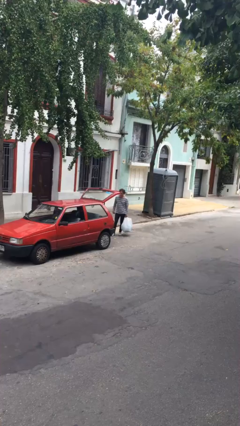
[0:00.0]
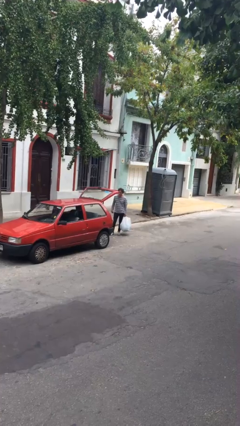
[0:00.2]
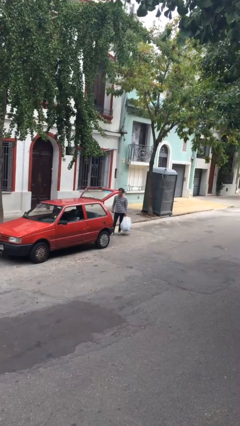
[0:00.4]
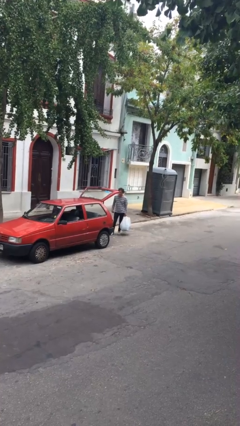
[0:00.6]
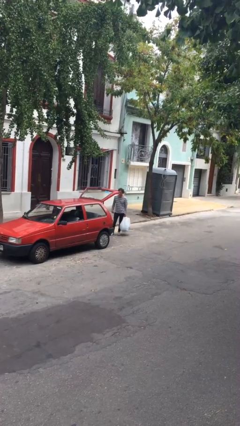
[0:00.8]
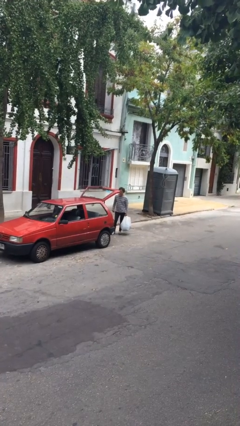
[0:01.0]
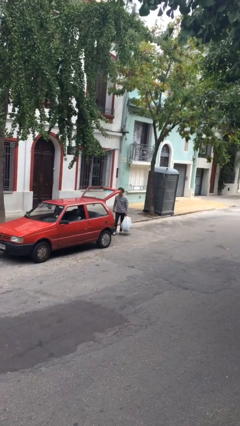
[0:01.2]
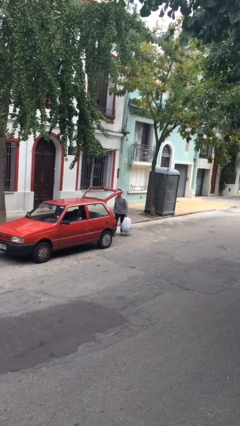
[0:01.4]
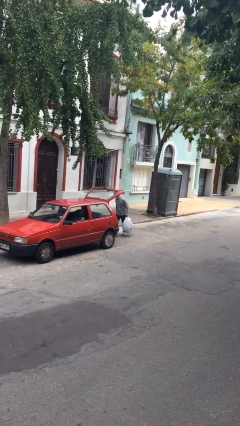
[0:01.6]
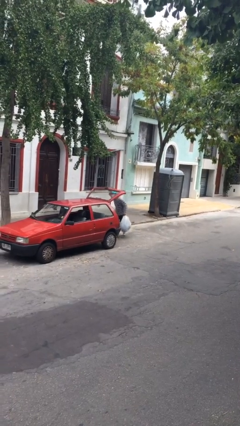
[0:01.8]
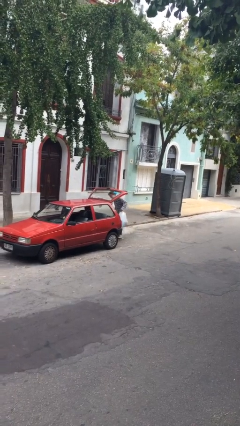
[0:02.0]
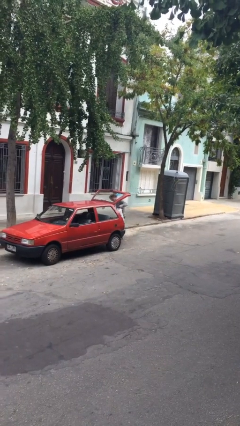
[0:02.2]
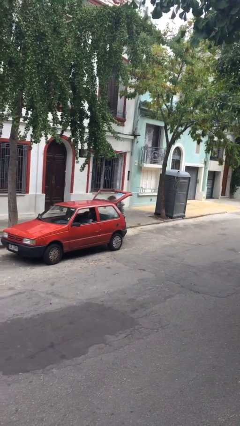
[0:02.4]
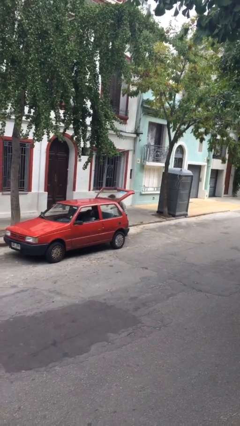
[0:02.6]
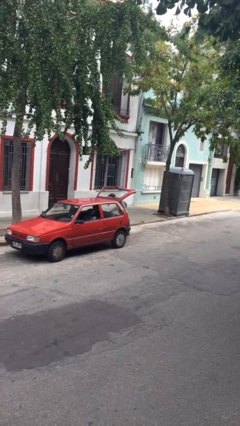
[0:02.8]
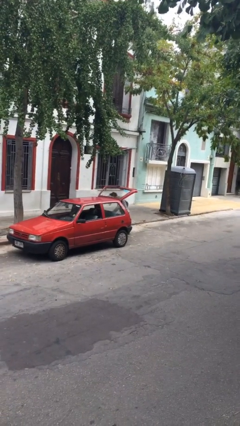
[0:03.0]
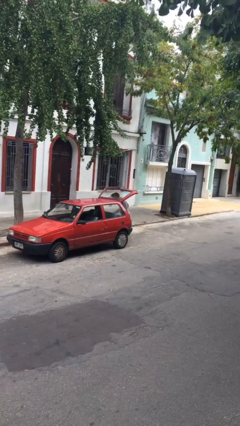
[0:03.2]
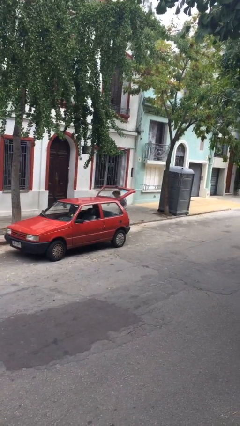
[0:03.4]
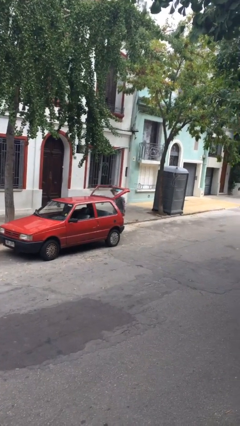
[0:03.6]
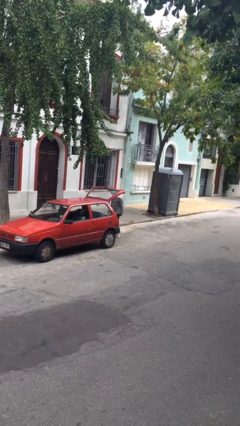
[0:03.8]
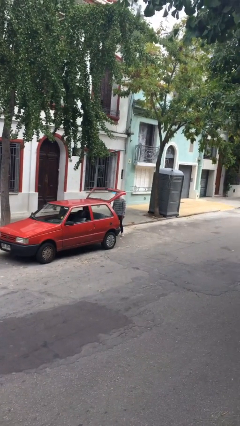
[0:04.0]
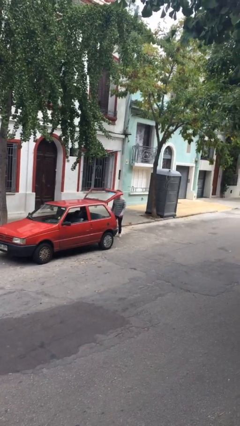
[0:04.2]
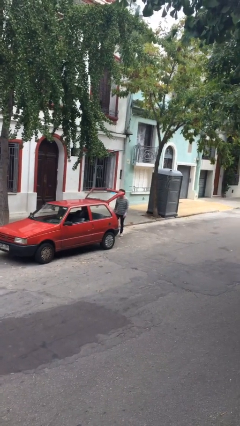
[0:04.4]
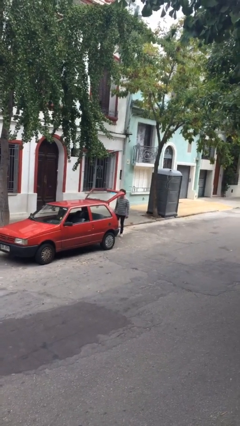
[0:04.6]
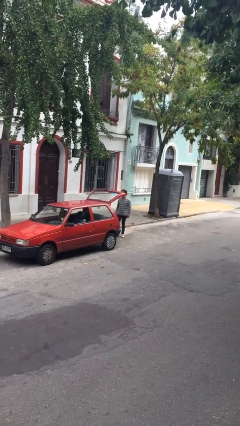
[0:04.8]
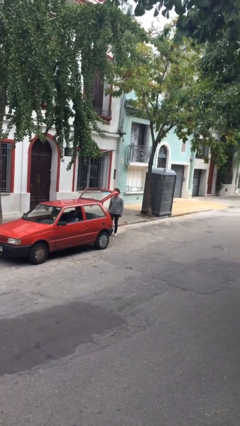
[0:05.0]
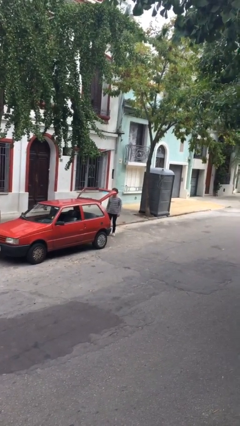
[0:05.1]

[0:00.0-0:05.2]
person loads car

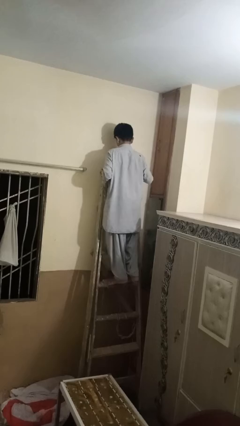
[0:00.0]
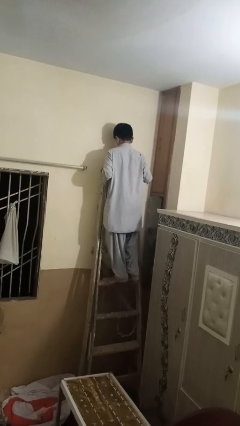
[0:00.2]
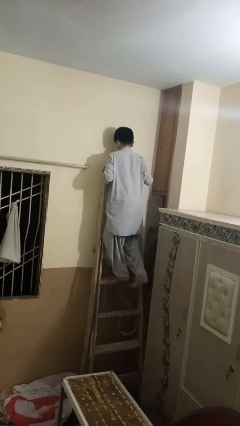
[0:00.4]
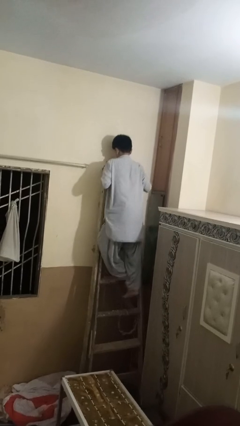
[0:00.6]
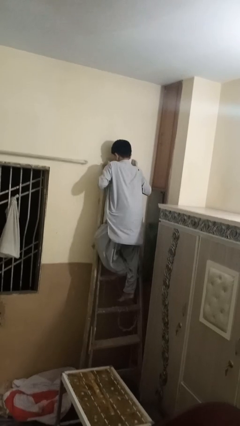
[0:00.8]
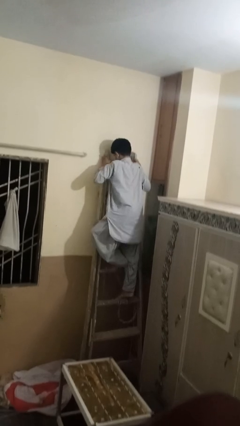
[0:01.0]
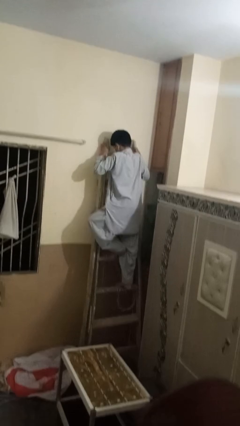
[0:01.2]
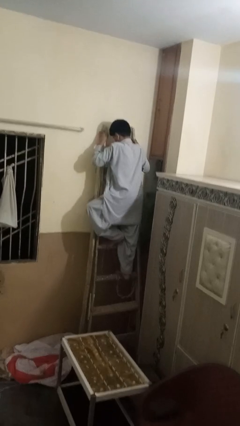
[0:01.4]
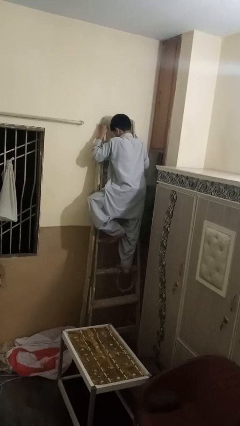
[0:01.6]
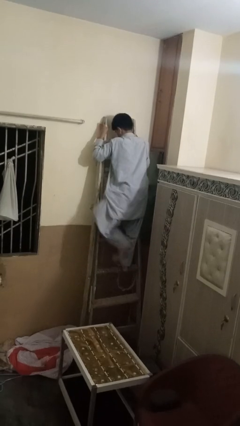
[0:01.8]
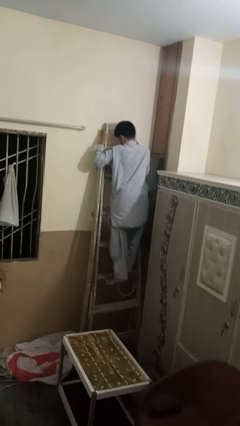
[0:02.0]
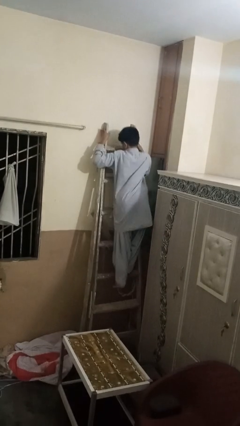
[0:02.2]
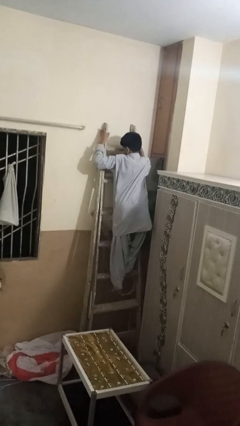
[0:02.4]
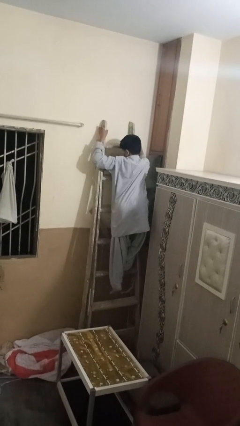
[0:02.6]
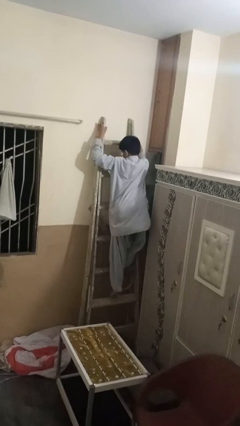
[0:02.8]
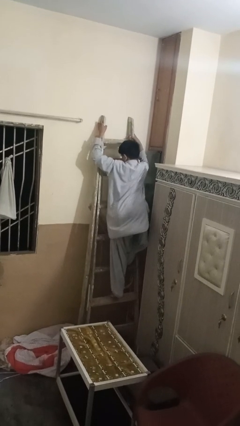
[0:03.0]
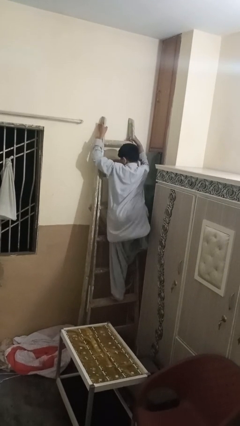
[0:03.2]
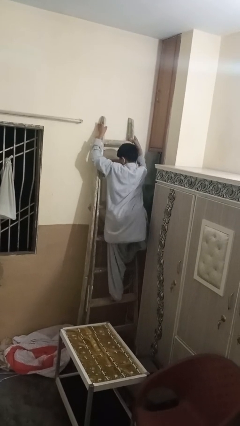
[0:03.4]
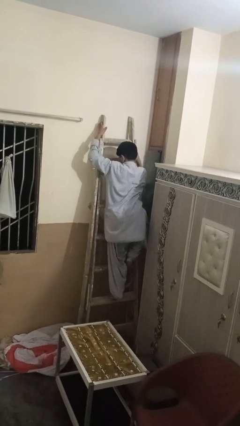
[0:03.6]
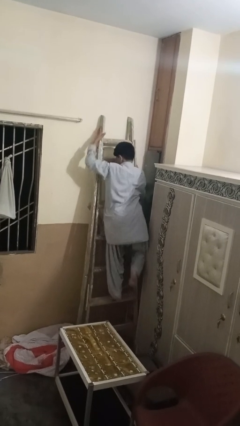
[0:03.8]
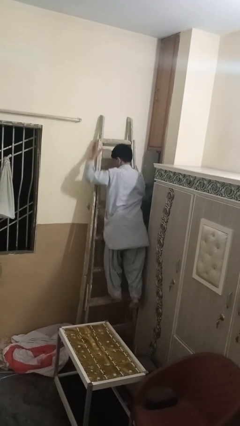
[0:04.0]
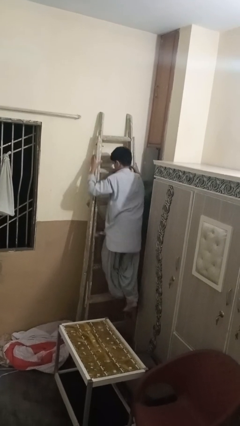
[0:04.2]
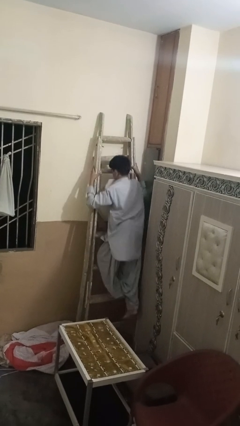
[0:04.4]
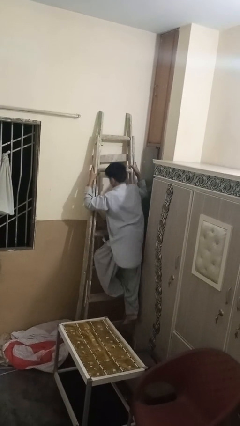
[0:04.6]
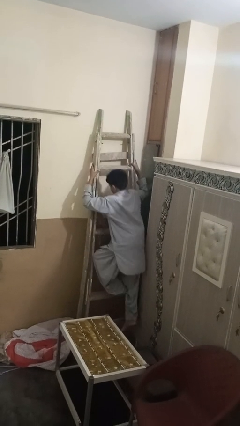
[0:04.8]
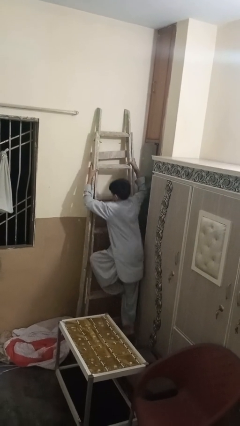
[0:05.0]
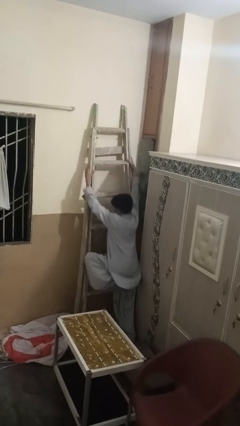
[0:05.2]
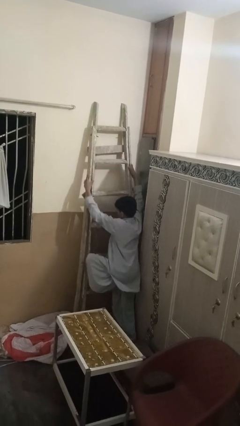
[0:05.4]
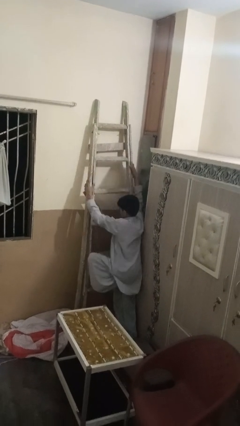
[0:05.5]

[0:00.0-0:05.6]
person climbs down ladder

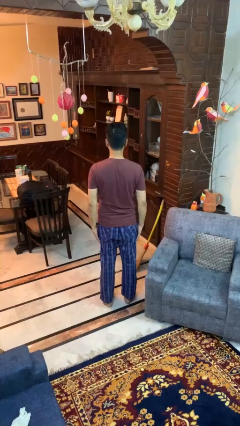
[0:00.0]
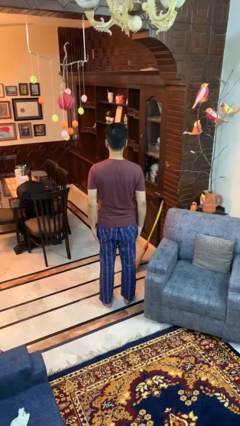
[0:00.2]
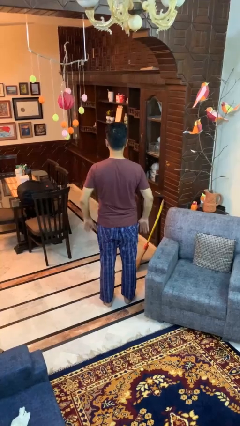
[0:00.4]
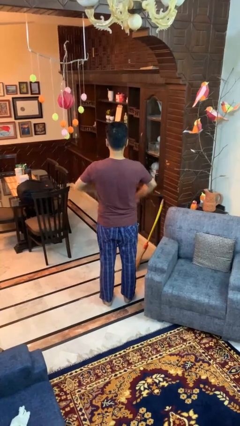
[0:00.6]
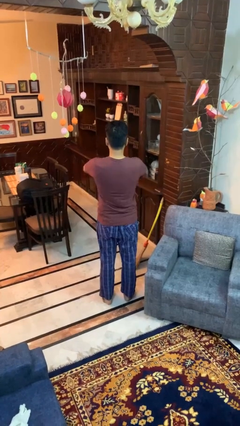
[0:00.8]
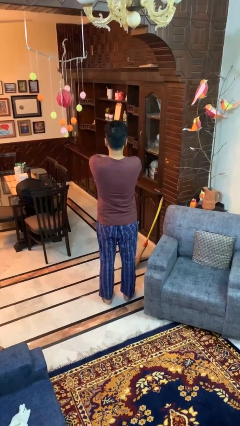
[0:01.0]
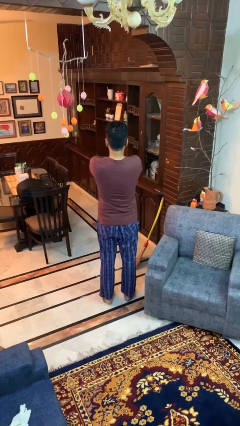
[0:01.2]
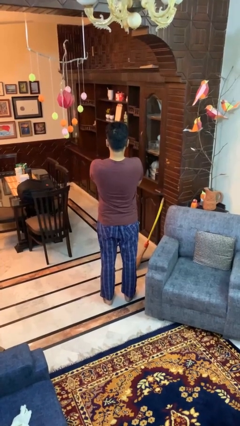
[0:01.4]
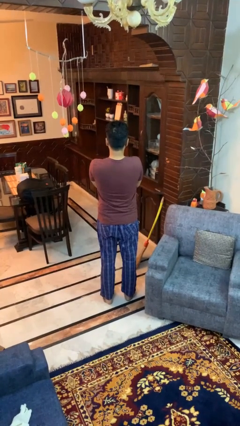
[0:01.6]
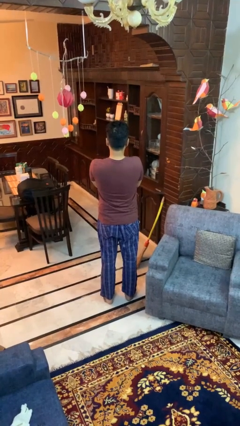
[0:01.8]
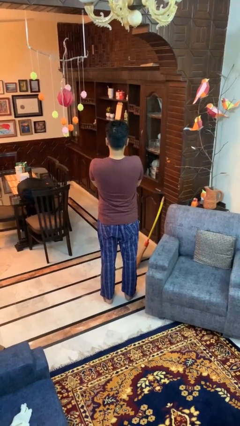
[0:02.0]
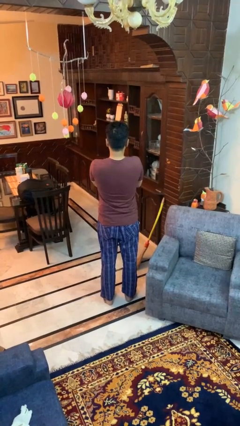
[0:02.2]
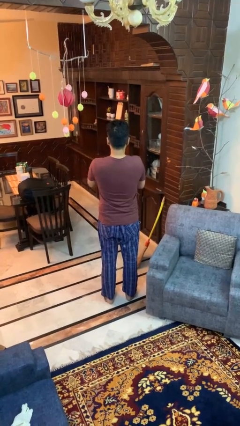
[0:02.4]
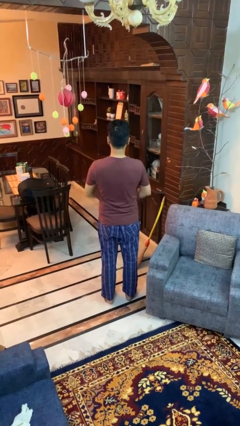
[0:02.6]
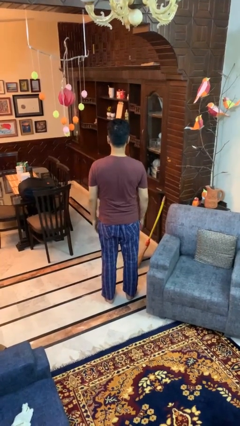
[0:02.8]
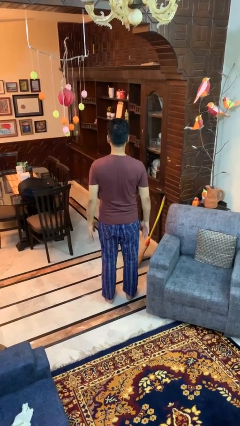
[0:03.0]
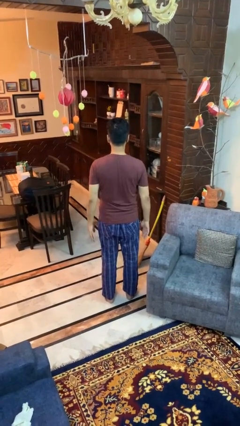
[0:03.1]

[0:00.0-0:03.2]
person crosses arms

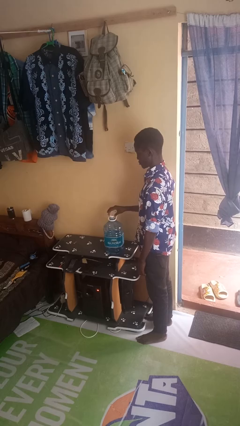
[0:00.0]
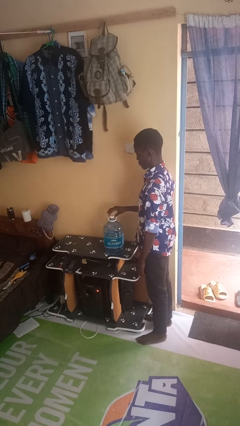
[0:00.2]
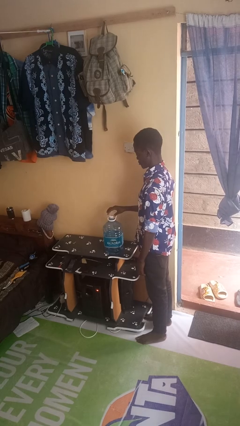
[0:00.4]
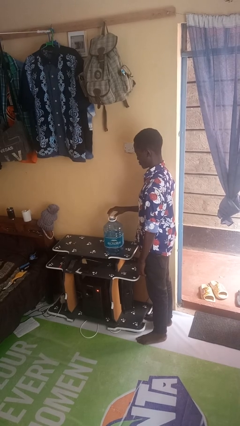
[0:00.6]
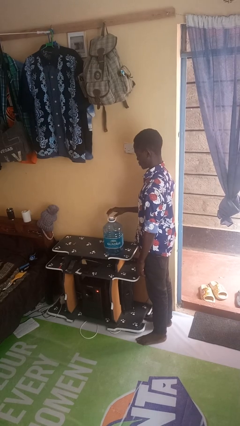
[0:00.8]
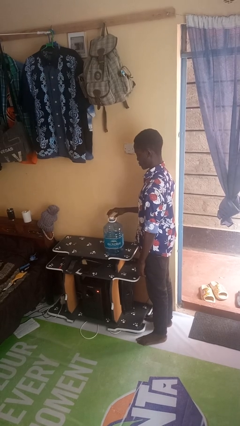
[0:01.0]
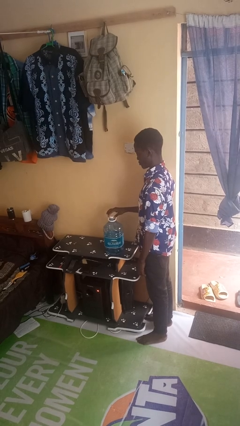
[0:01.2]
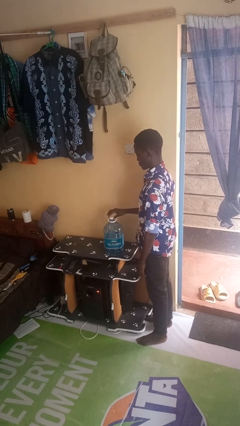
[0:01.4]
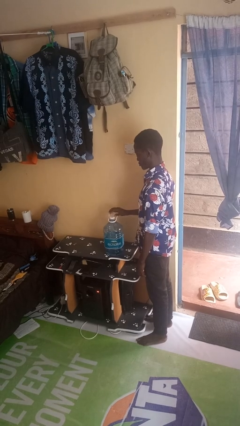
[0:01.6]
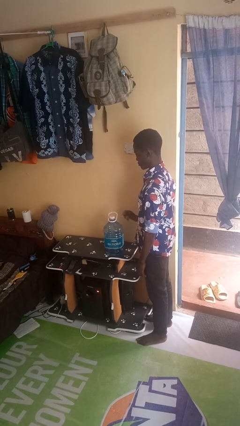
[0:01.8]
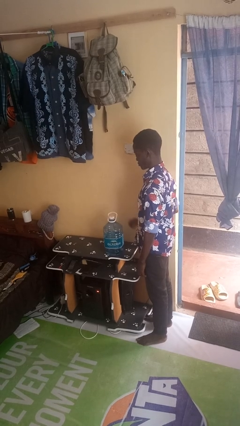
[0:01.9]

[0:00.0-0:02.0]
person screws lid to bottle

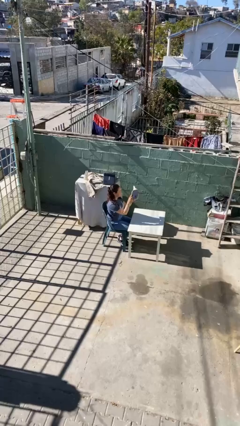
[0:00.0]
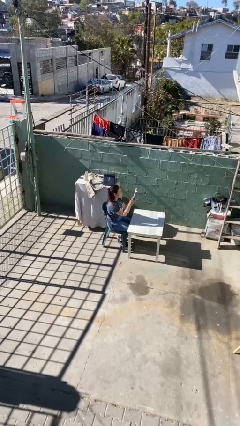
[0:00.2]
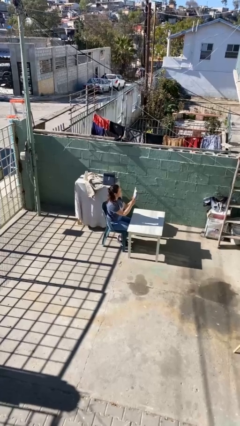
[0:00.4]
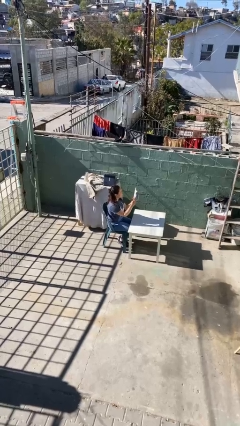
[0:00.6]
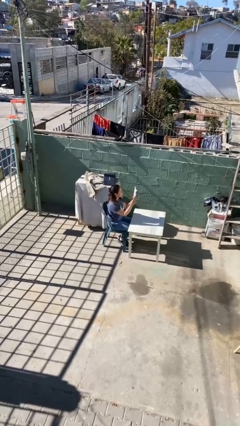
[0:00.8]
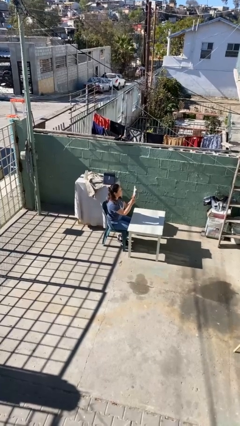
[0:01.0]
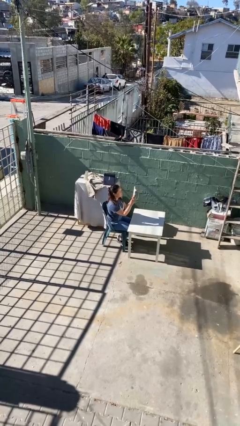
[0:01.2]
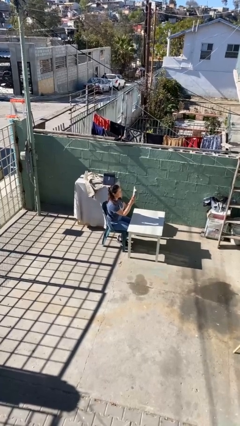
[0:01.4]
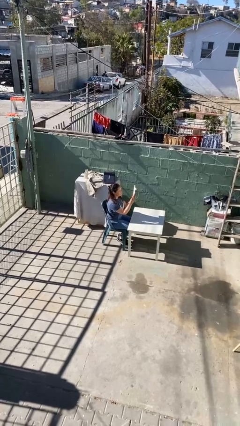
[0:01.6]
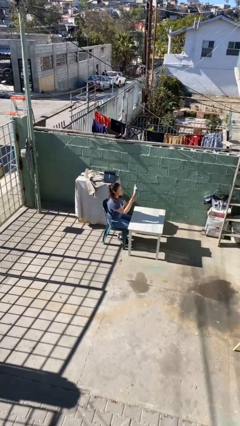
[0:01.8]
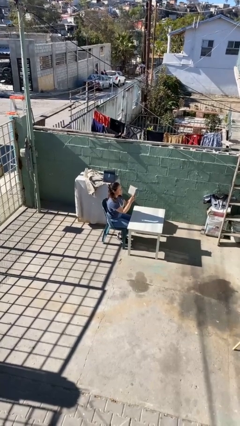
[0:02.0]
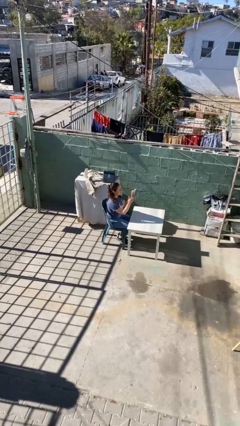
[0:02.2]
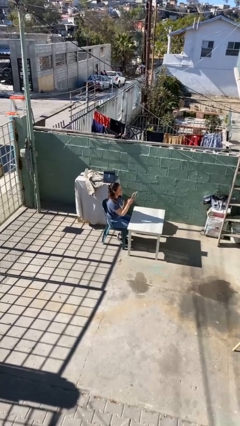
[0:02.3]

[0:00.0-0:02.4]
person reads document
